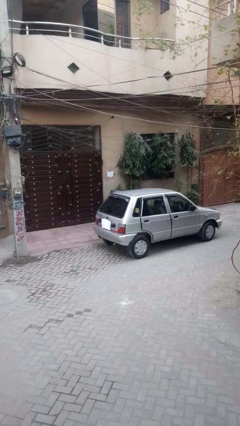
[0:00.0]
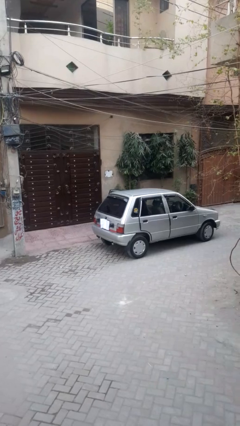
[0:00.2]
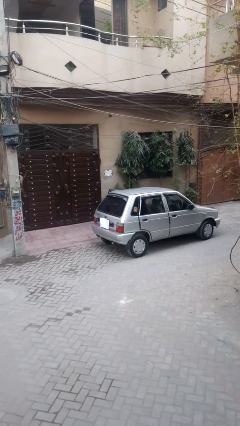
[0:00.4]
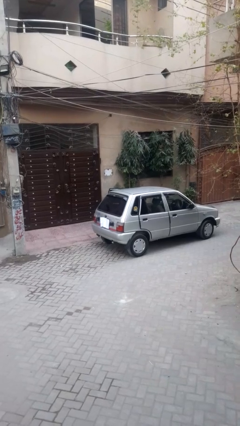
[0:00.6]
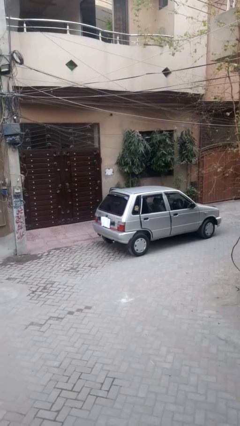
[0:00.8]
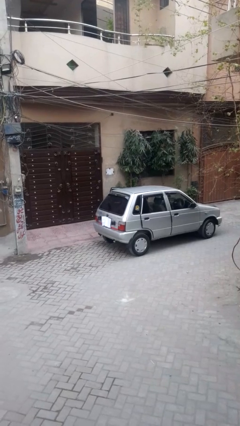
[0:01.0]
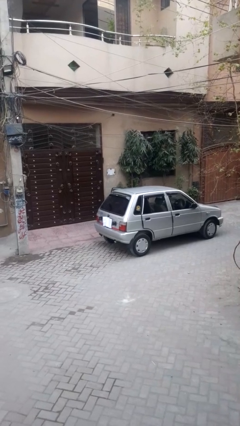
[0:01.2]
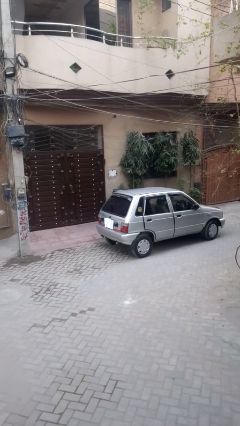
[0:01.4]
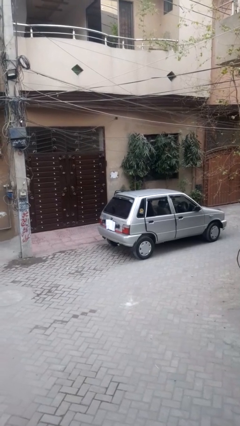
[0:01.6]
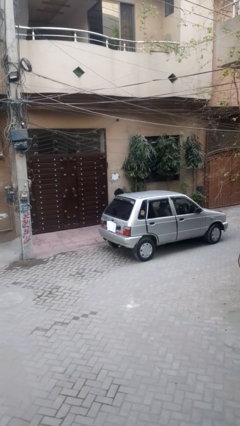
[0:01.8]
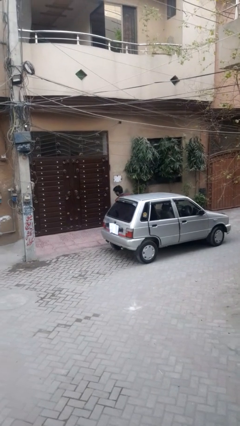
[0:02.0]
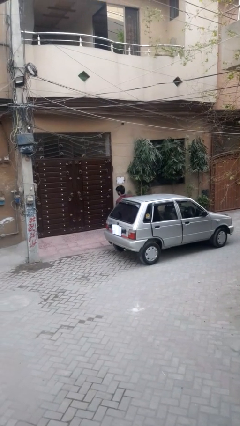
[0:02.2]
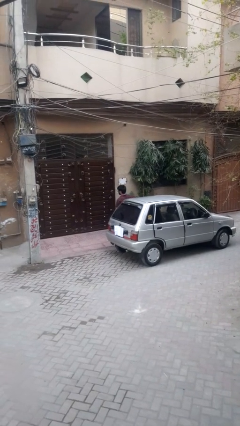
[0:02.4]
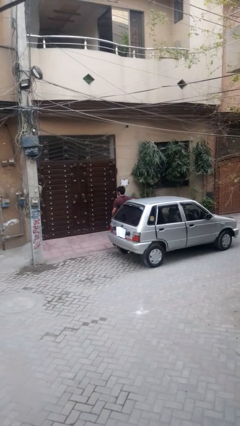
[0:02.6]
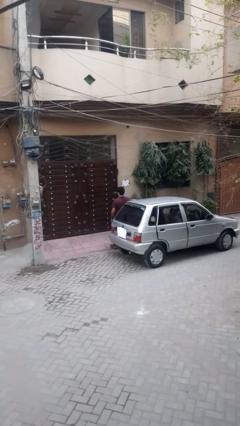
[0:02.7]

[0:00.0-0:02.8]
person exits car

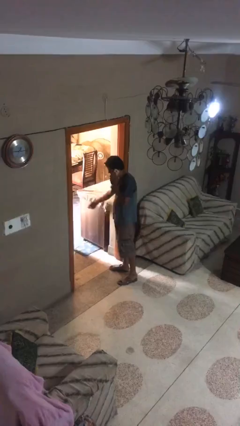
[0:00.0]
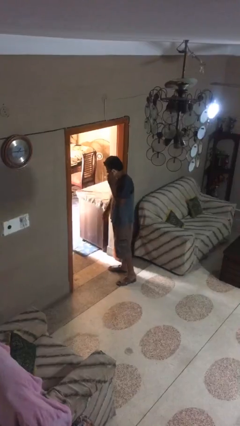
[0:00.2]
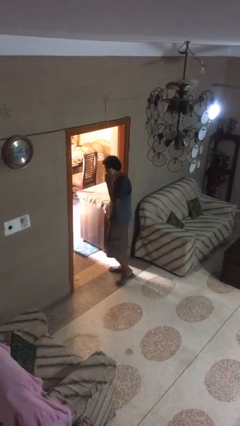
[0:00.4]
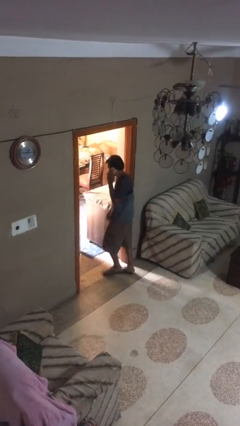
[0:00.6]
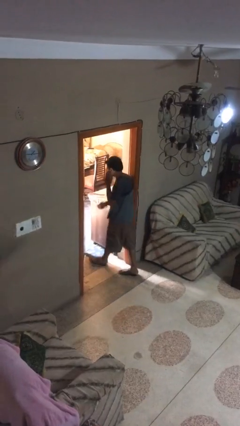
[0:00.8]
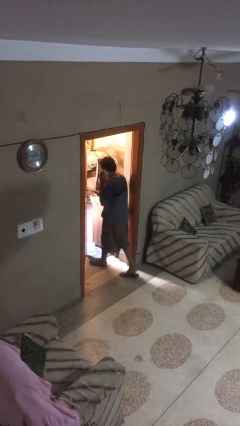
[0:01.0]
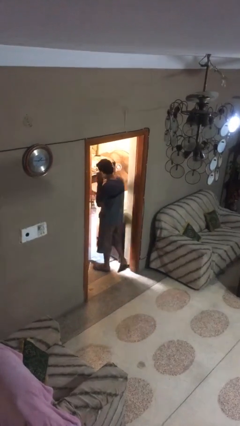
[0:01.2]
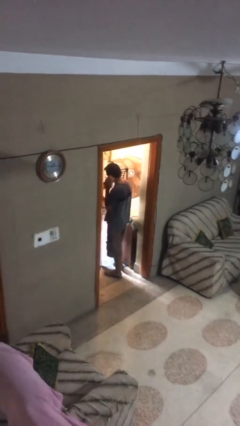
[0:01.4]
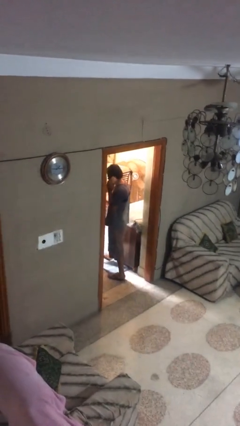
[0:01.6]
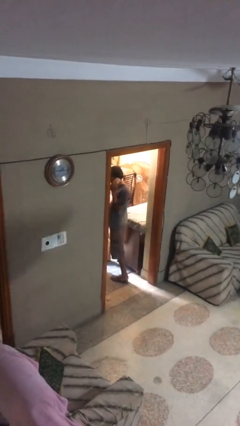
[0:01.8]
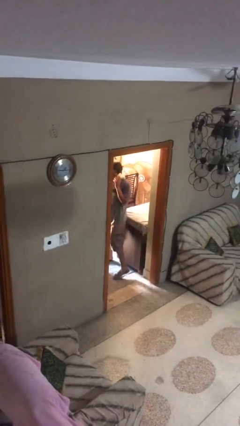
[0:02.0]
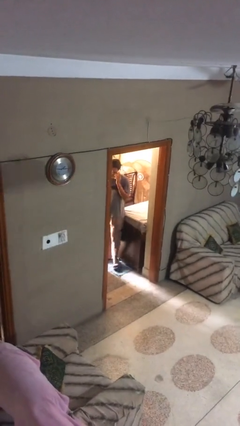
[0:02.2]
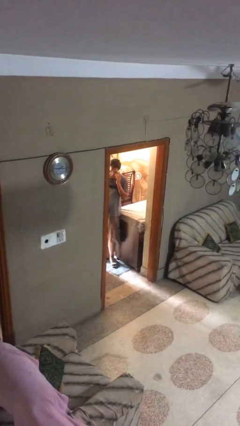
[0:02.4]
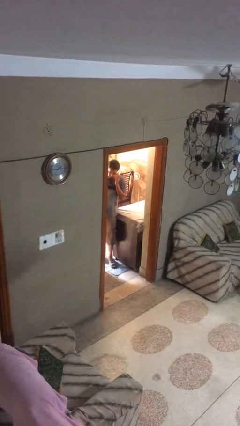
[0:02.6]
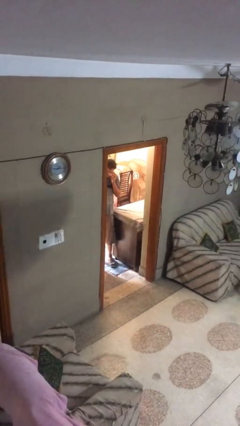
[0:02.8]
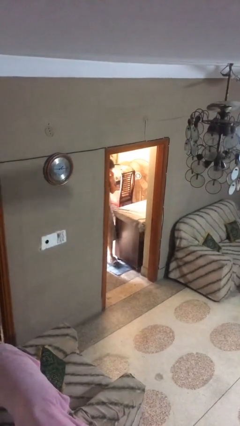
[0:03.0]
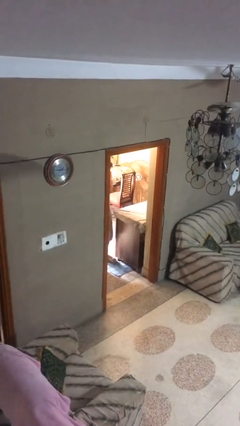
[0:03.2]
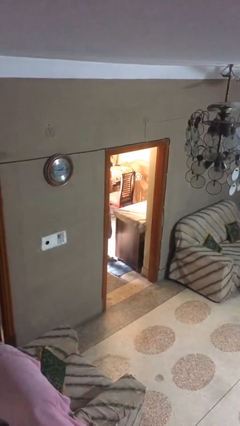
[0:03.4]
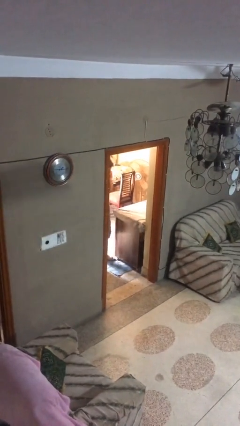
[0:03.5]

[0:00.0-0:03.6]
person exits scene through structure

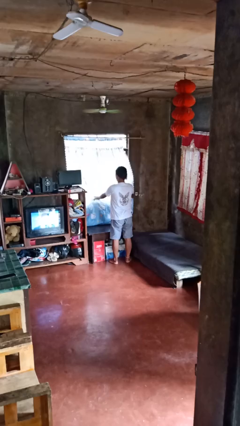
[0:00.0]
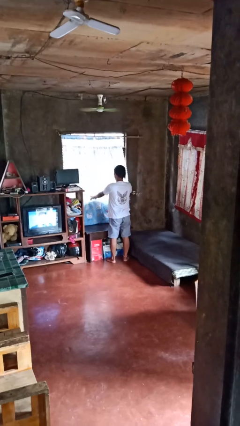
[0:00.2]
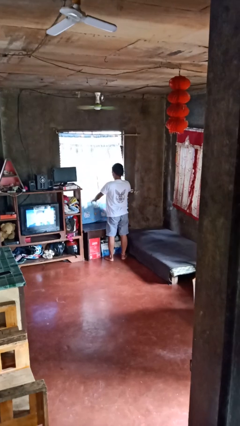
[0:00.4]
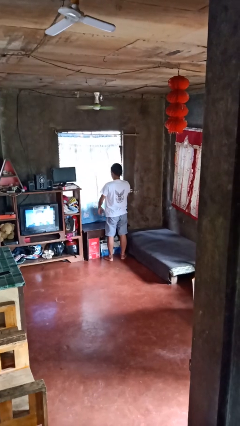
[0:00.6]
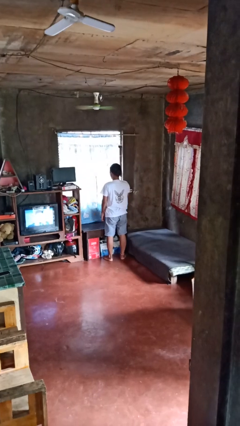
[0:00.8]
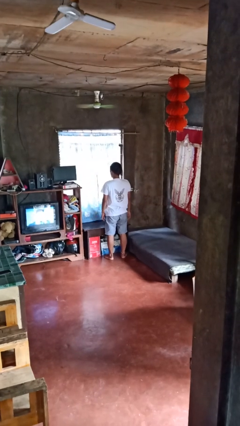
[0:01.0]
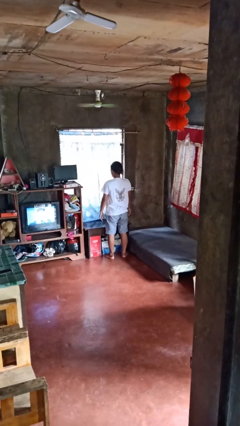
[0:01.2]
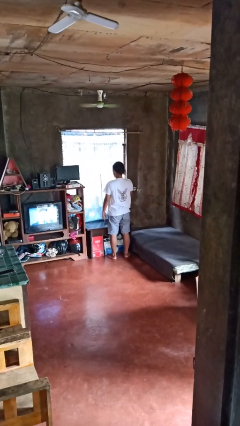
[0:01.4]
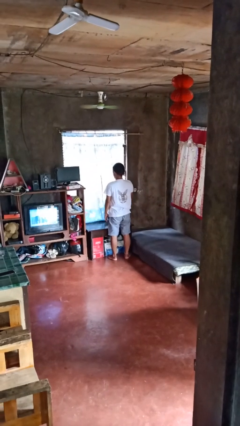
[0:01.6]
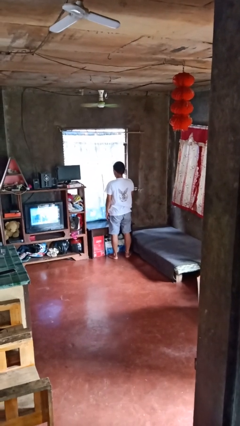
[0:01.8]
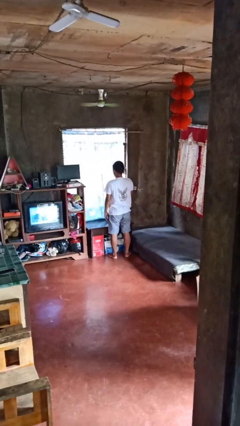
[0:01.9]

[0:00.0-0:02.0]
person closes curtains

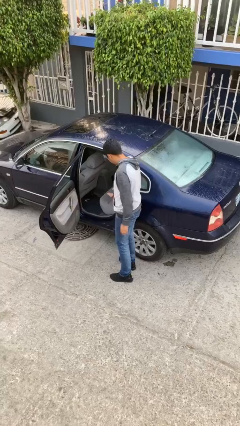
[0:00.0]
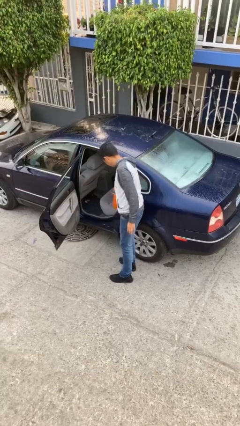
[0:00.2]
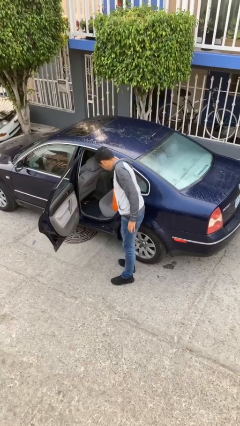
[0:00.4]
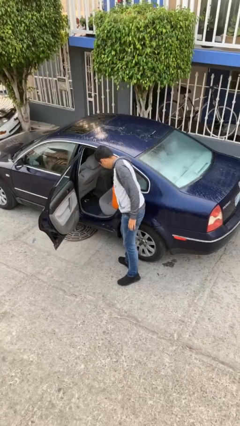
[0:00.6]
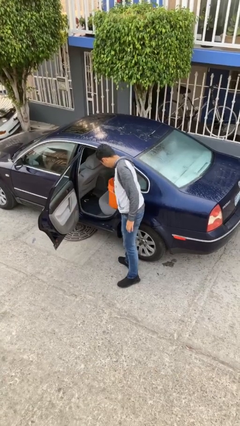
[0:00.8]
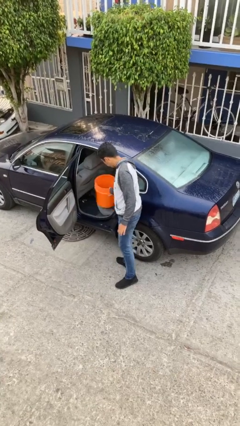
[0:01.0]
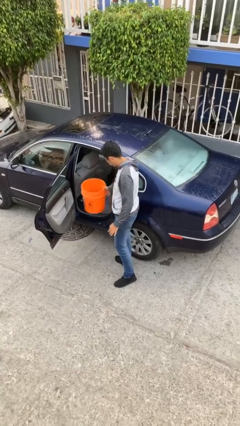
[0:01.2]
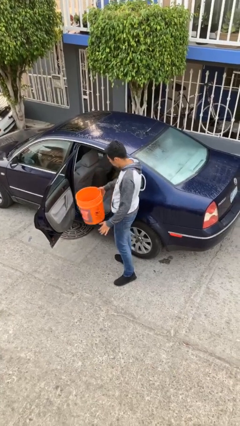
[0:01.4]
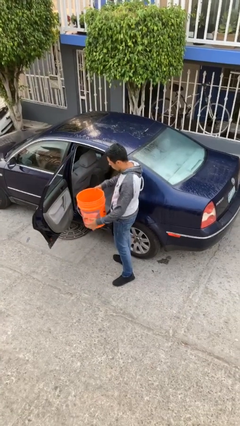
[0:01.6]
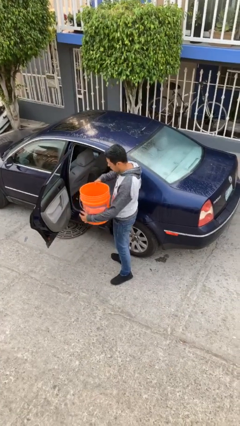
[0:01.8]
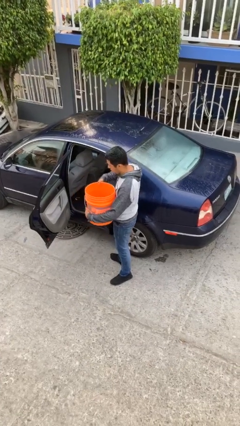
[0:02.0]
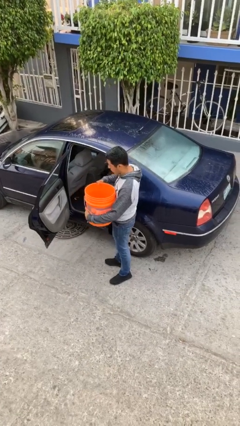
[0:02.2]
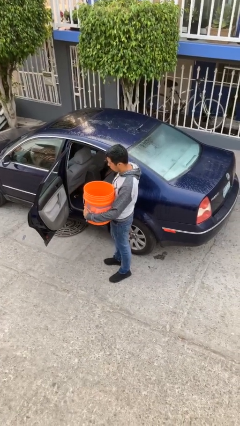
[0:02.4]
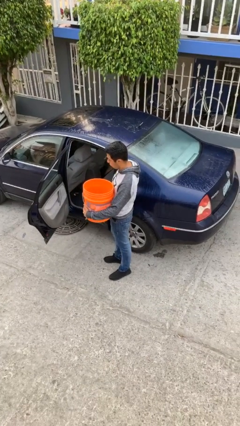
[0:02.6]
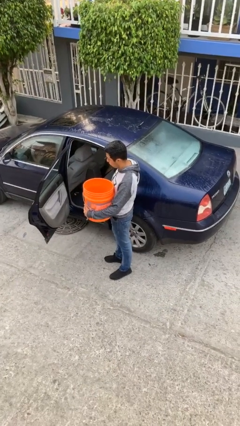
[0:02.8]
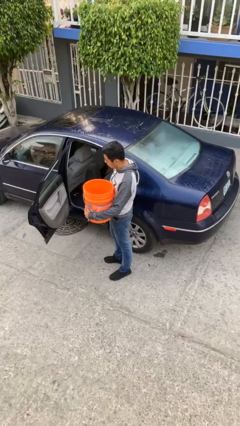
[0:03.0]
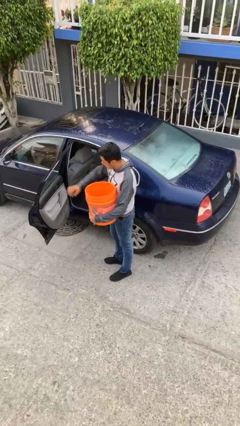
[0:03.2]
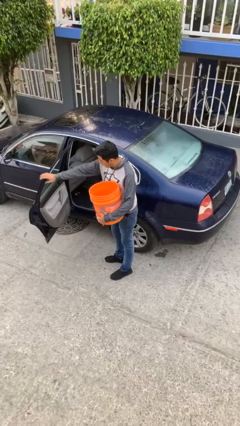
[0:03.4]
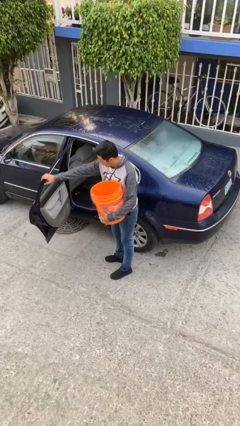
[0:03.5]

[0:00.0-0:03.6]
person unloads car

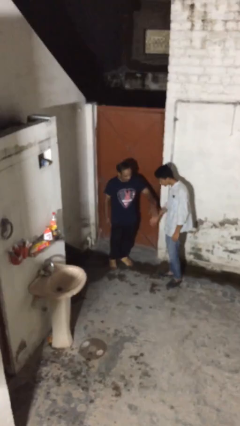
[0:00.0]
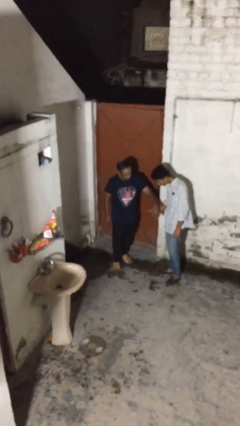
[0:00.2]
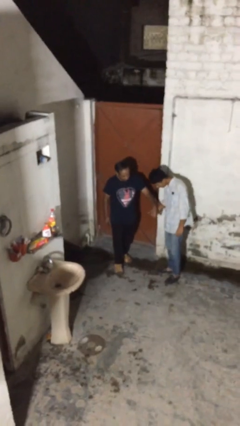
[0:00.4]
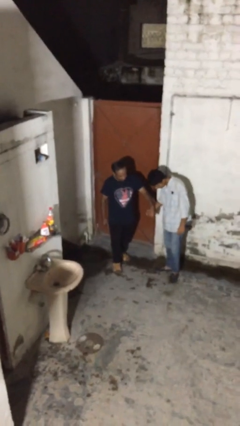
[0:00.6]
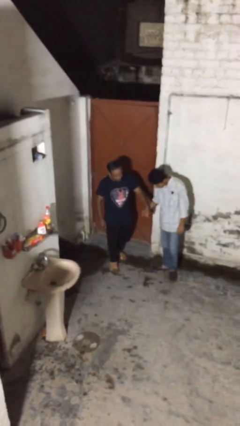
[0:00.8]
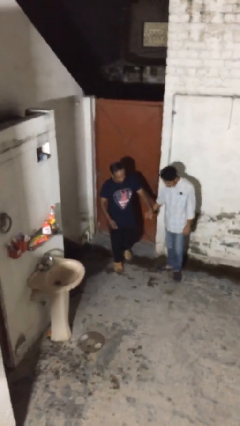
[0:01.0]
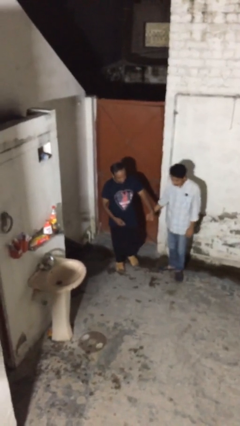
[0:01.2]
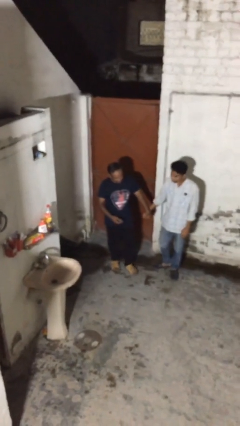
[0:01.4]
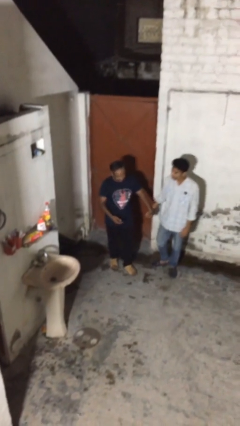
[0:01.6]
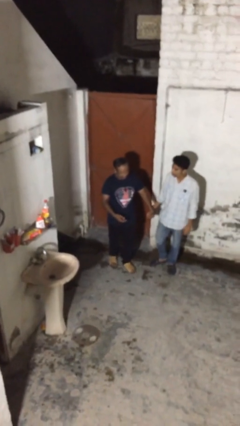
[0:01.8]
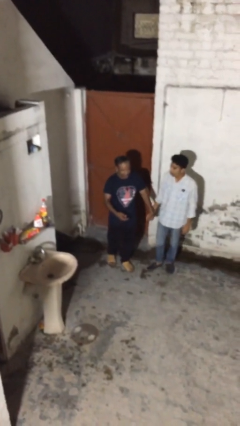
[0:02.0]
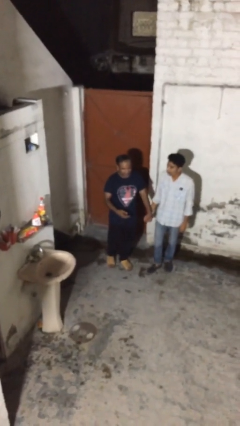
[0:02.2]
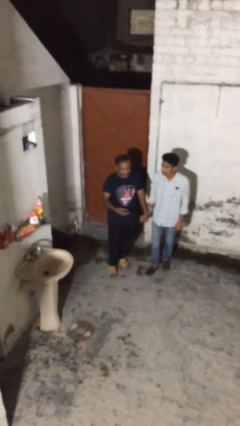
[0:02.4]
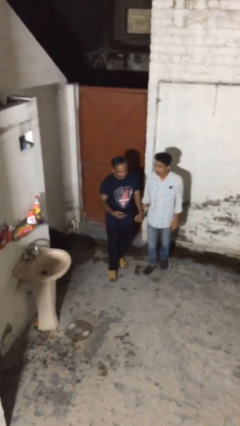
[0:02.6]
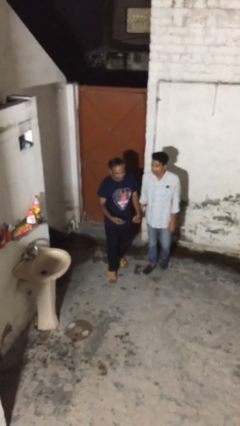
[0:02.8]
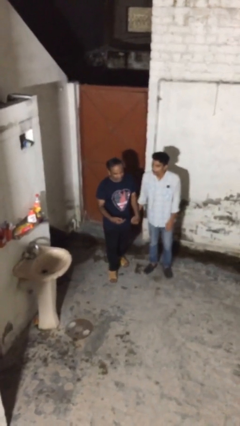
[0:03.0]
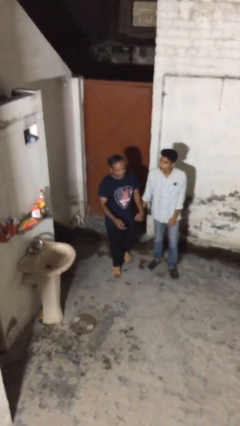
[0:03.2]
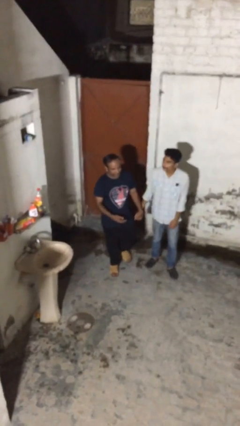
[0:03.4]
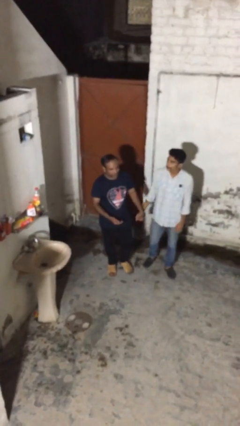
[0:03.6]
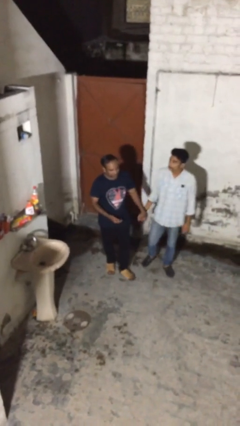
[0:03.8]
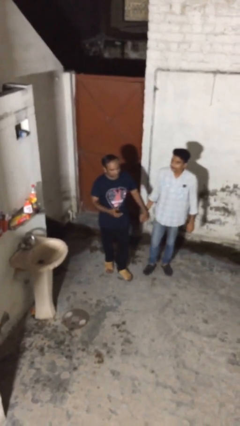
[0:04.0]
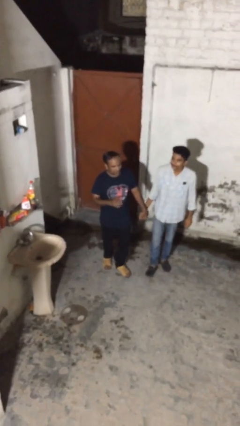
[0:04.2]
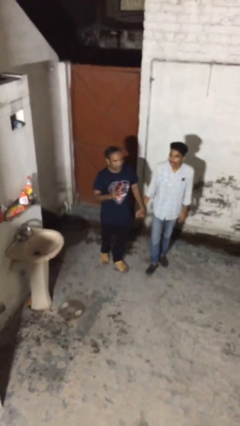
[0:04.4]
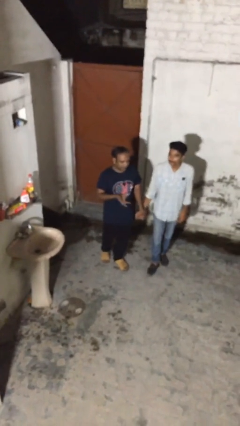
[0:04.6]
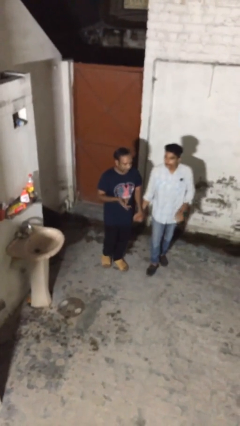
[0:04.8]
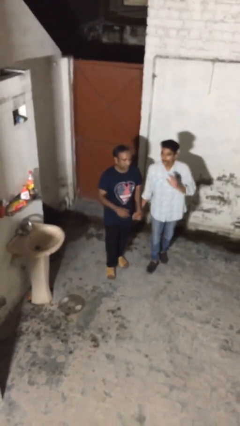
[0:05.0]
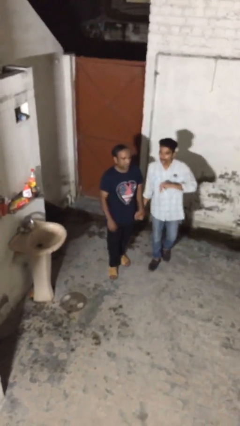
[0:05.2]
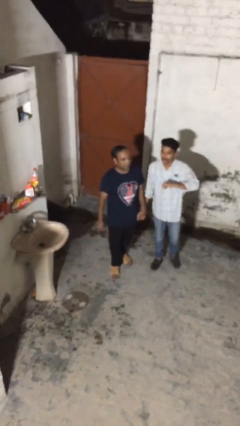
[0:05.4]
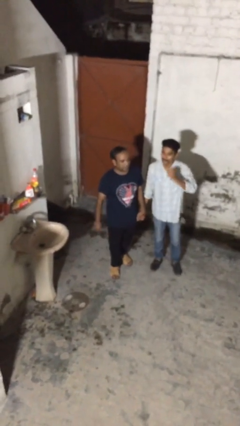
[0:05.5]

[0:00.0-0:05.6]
person holds hand
